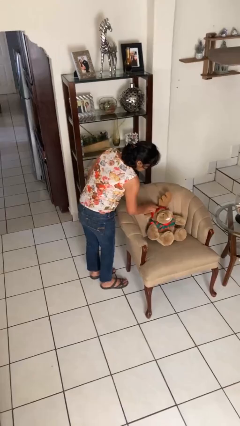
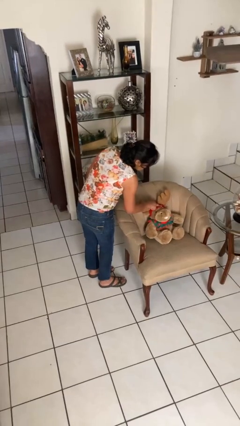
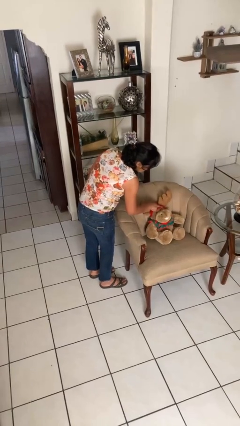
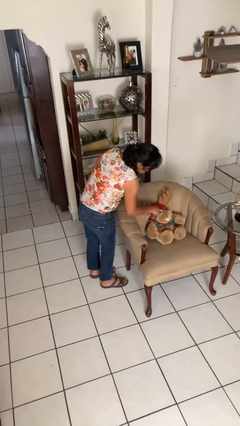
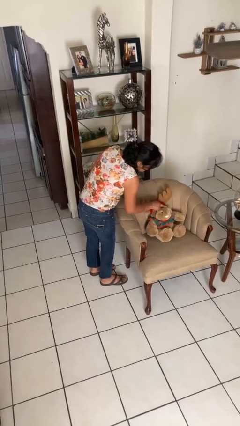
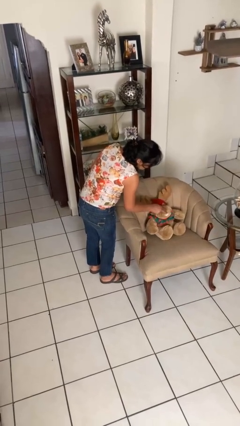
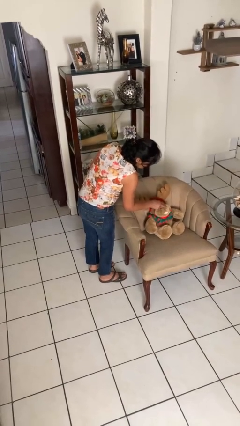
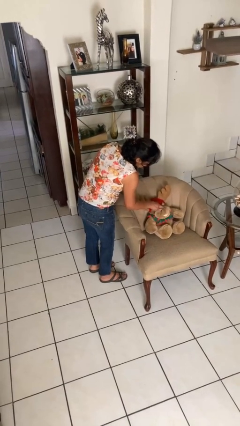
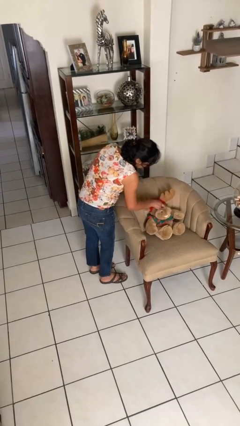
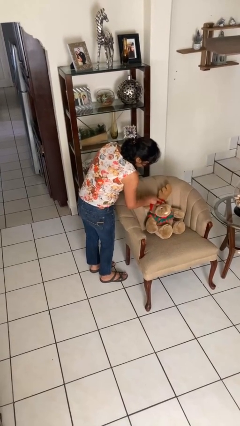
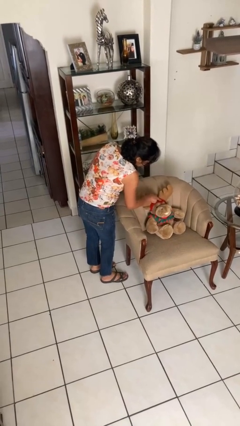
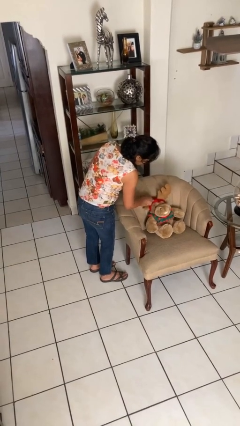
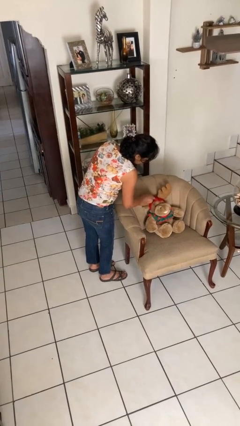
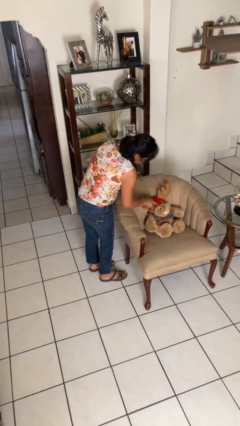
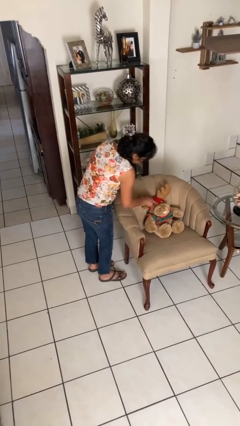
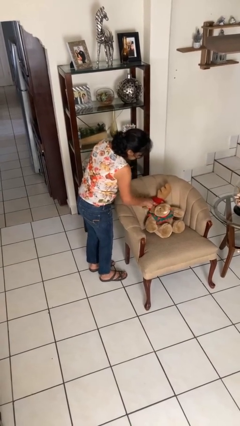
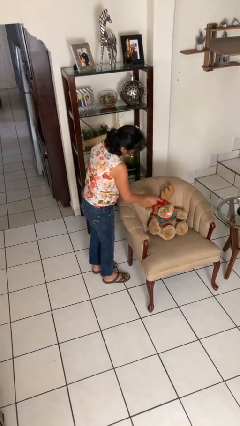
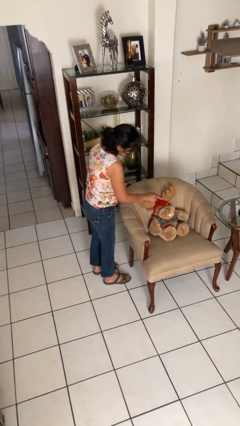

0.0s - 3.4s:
person taps object with finger

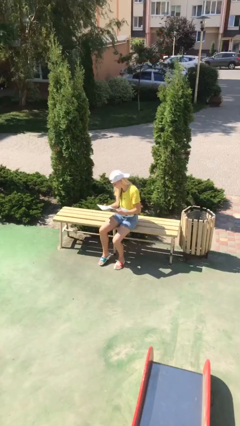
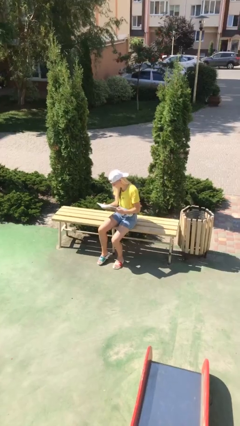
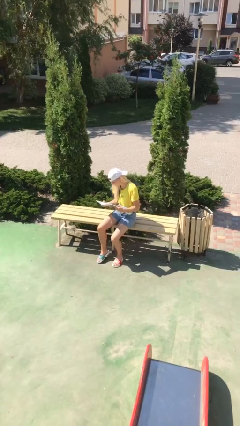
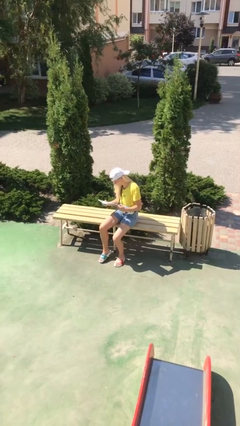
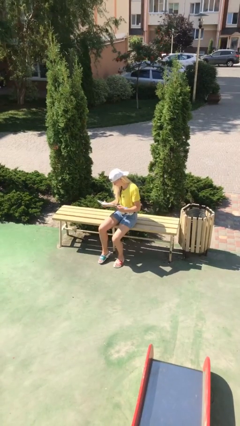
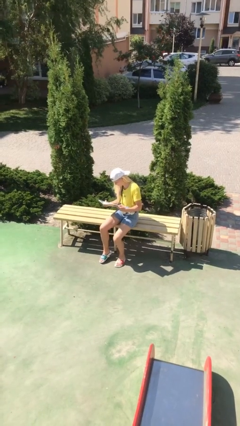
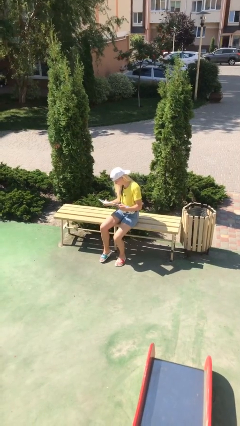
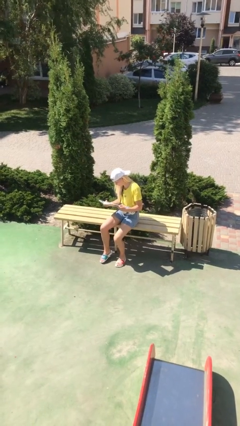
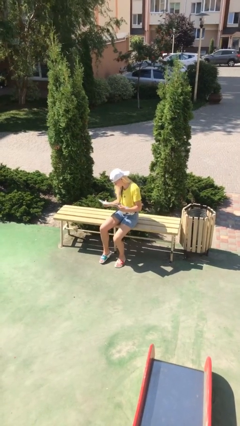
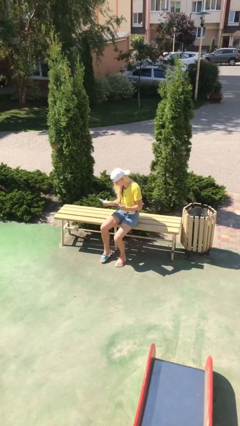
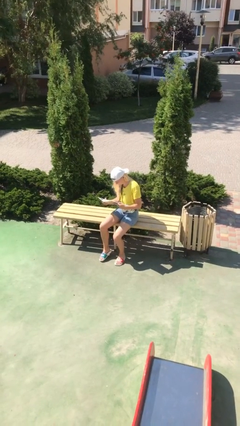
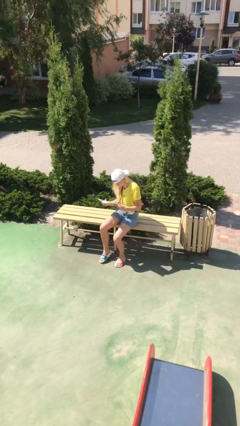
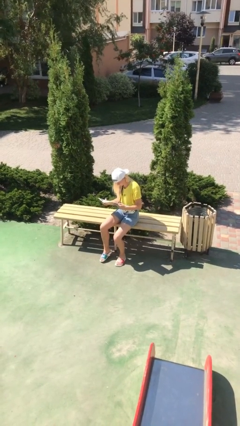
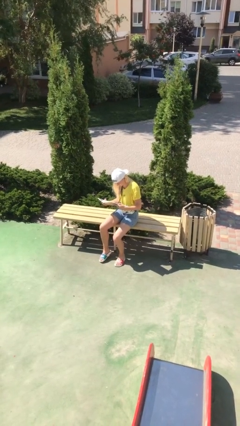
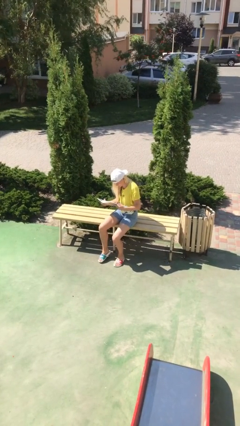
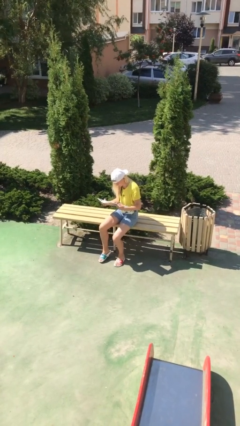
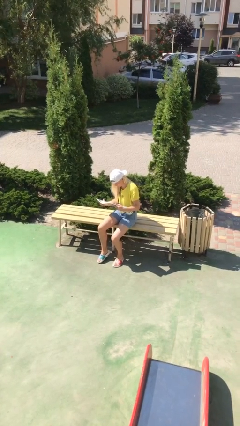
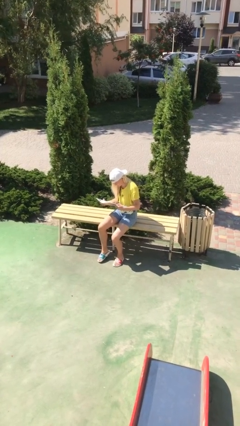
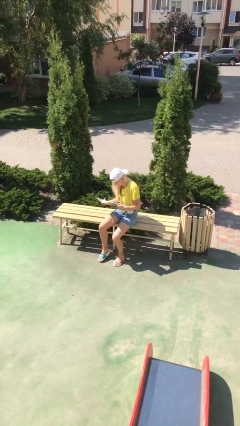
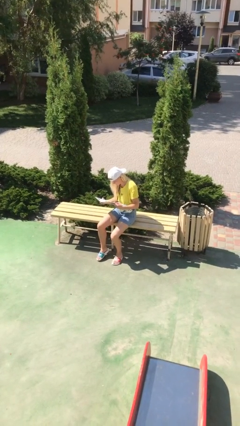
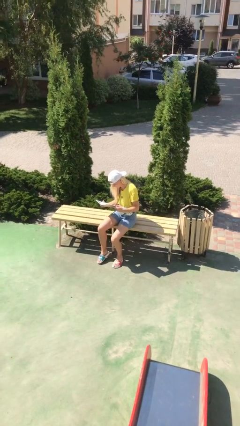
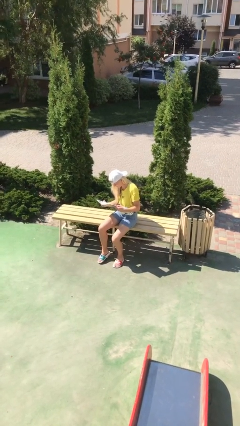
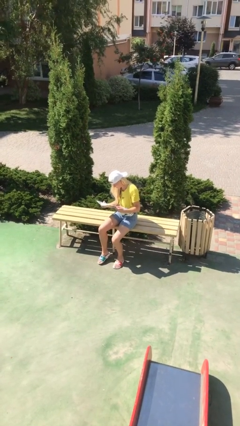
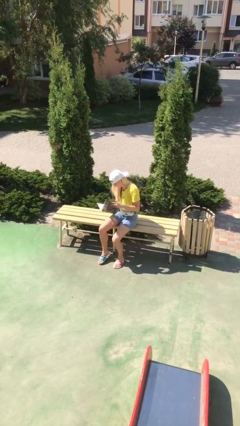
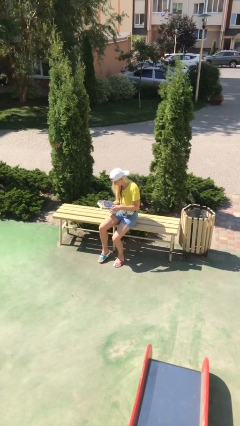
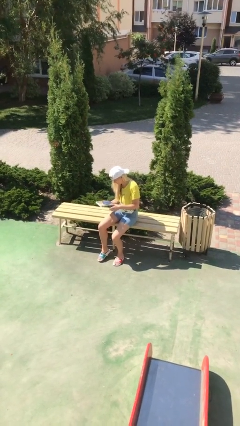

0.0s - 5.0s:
person reads document

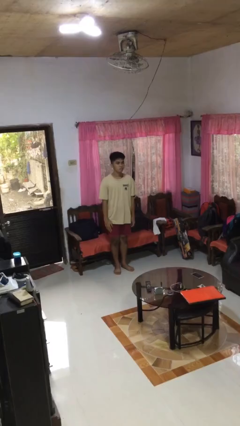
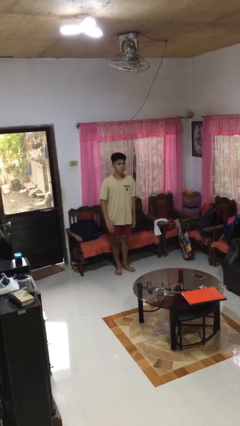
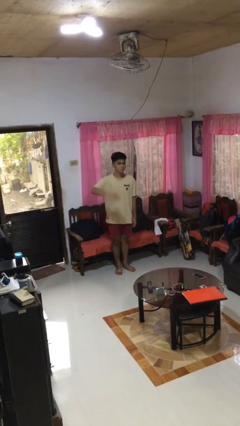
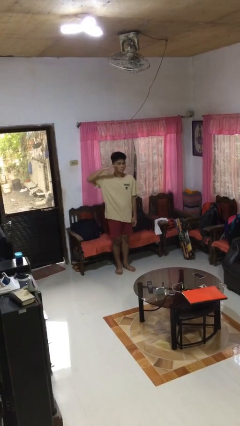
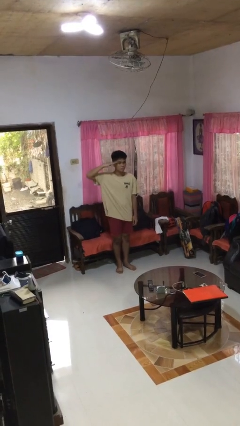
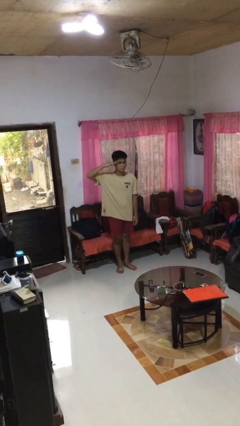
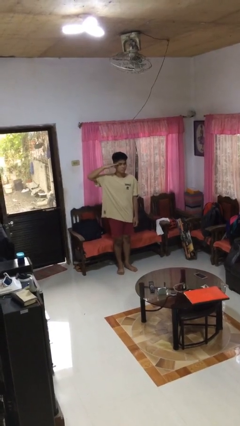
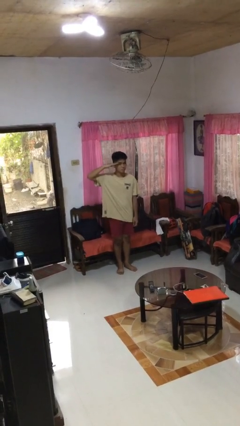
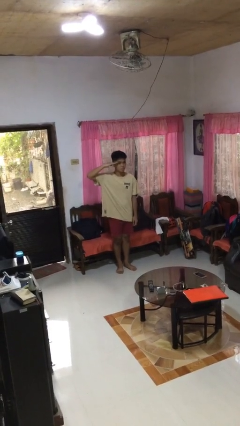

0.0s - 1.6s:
person salutes

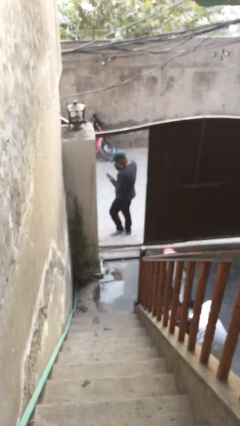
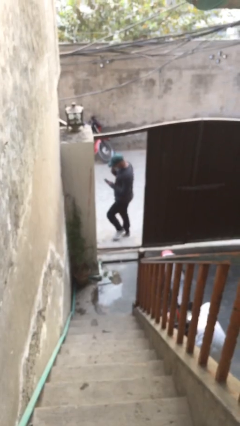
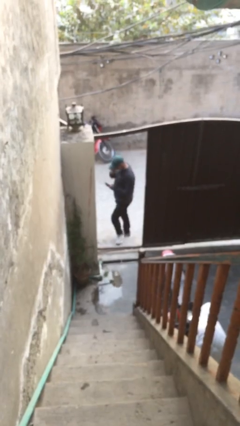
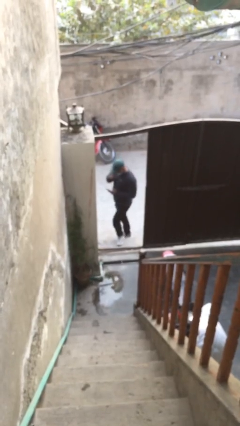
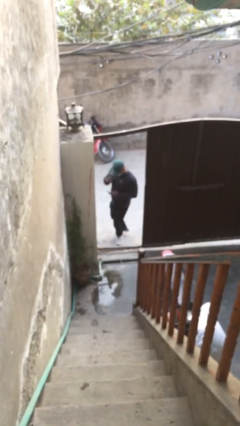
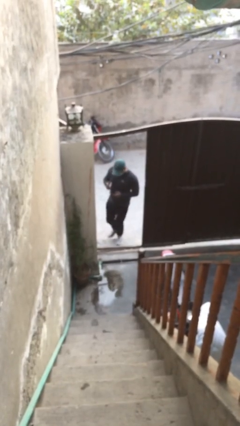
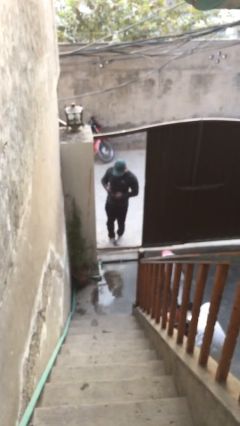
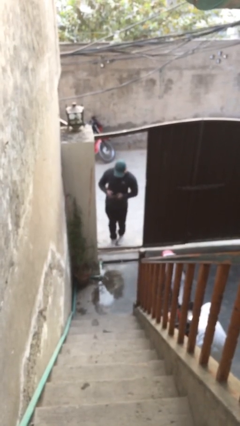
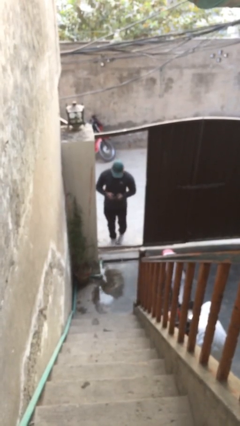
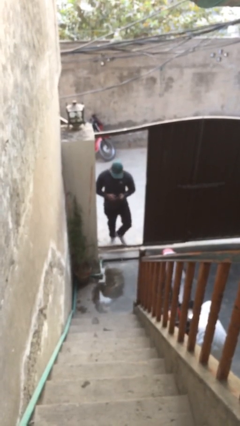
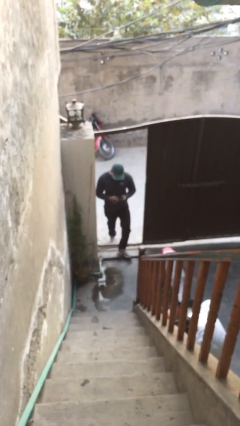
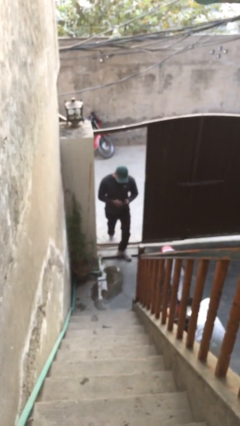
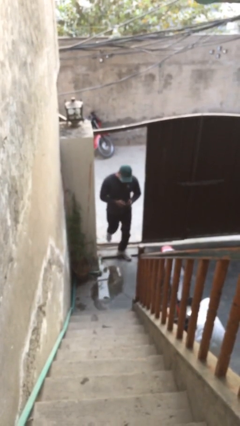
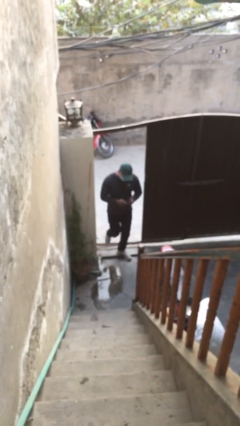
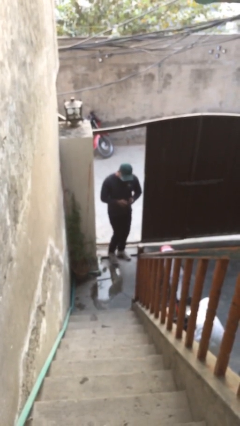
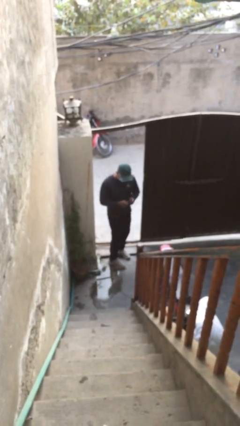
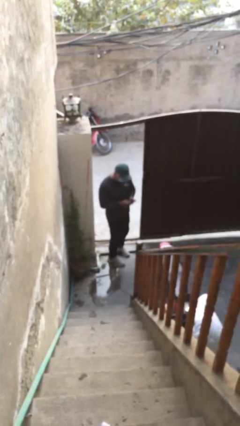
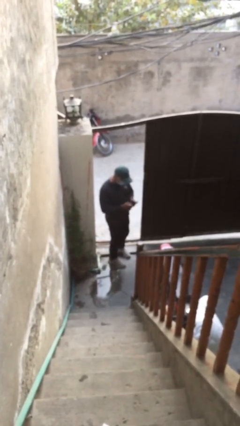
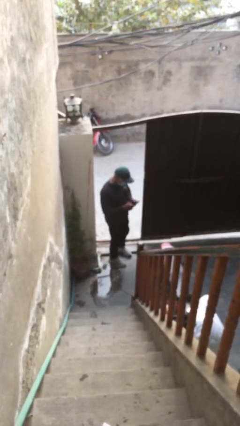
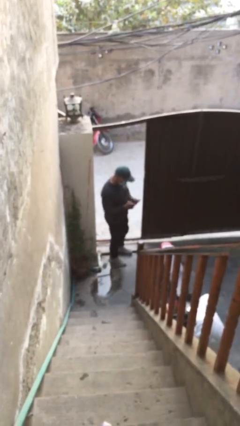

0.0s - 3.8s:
person enters scene through structure

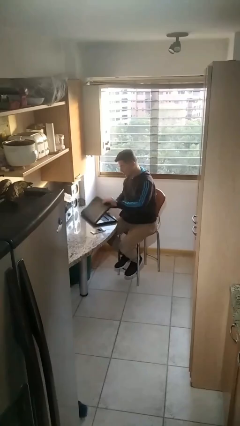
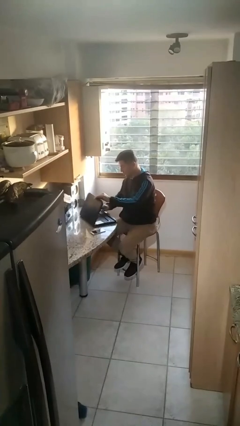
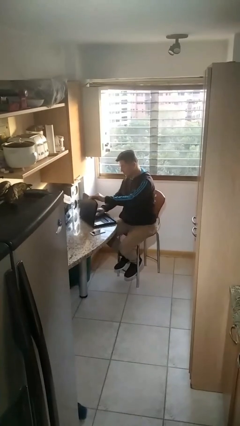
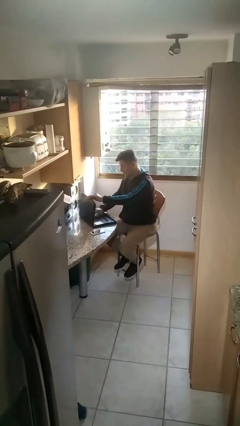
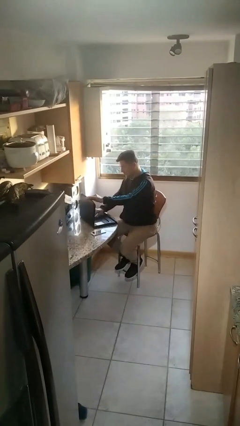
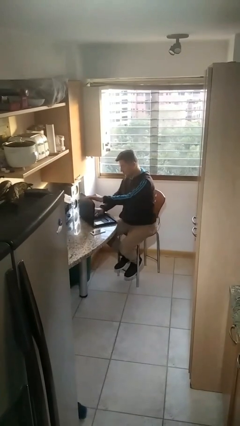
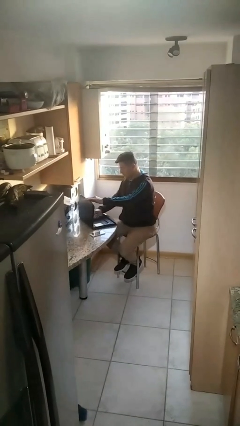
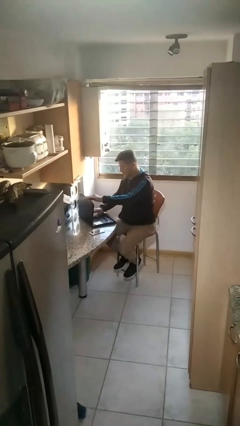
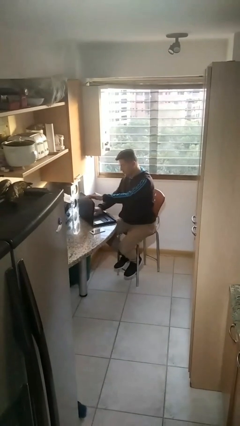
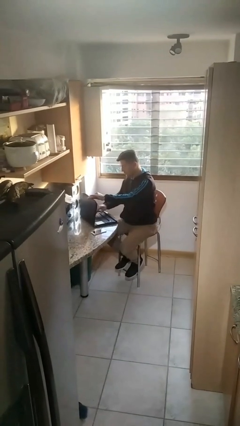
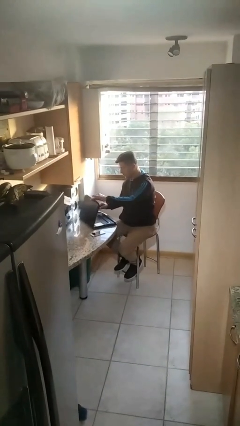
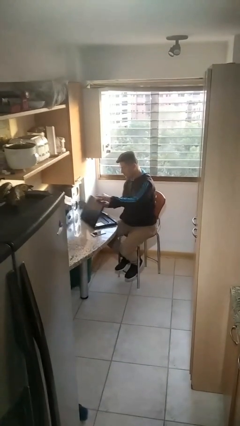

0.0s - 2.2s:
person interacts with laptop

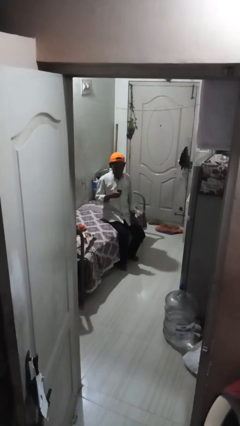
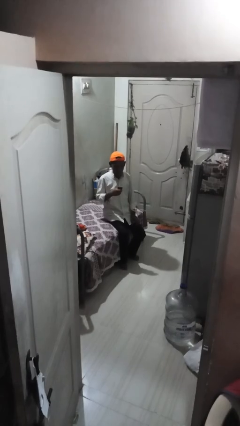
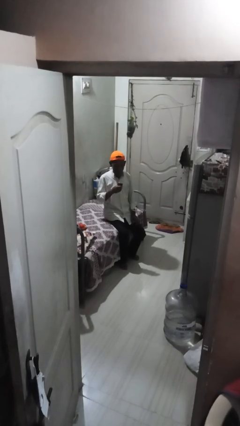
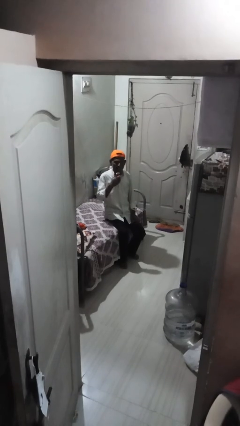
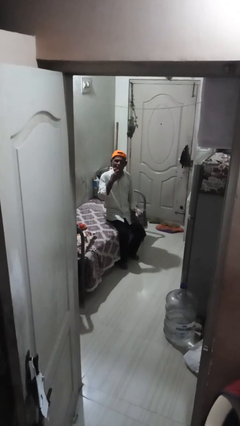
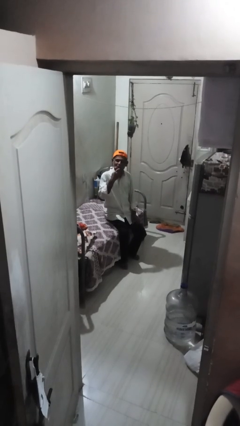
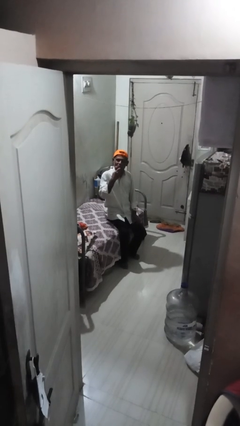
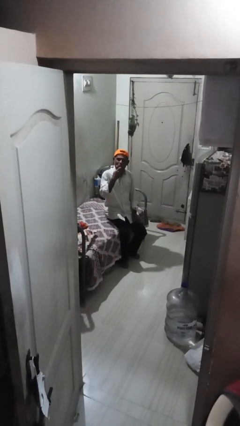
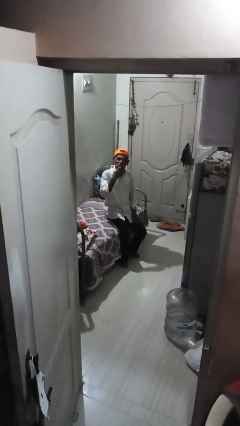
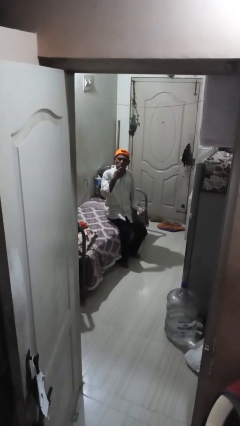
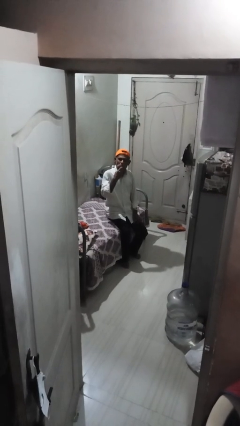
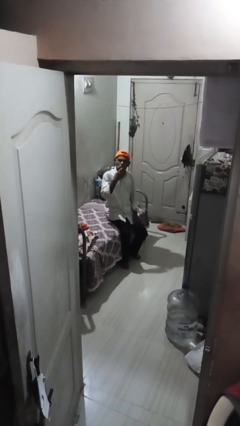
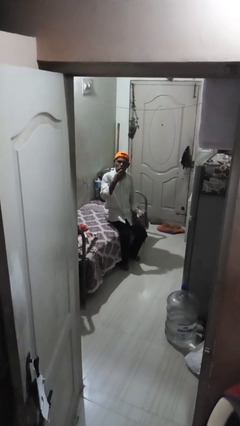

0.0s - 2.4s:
person eats apple
